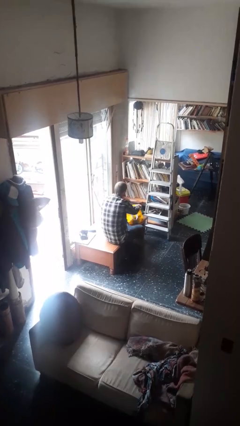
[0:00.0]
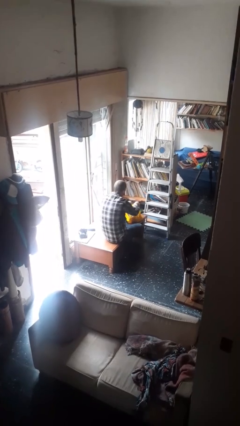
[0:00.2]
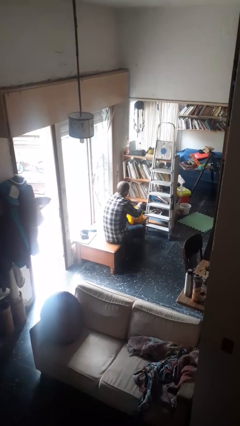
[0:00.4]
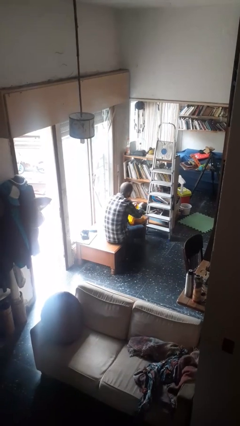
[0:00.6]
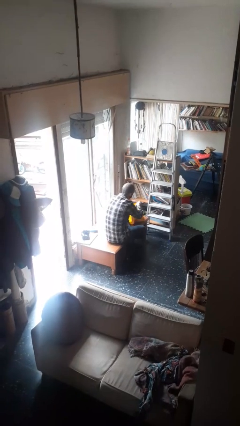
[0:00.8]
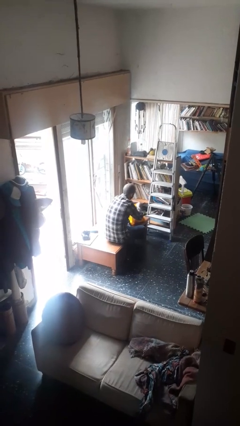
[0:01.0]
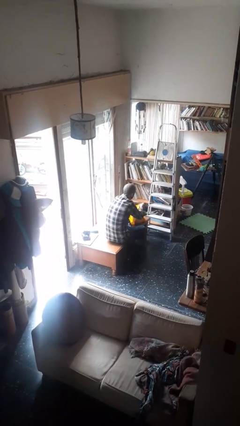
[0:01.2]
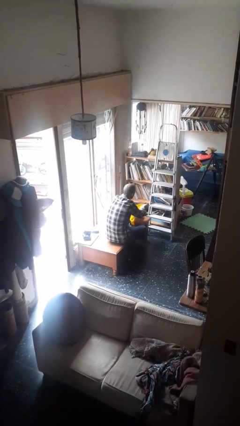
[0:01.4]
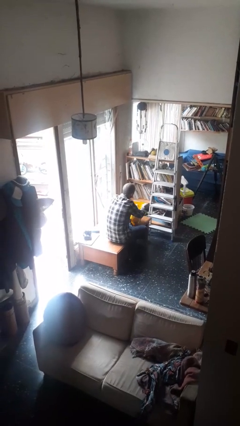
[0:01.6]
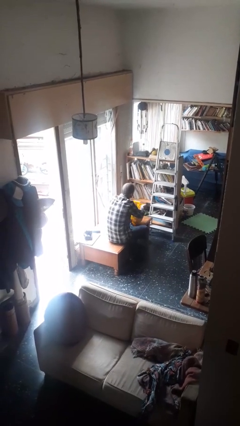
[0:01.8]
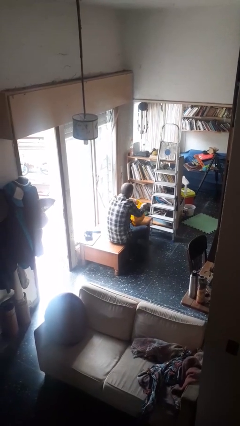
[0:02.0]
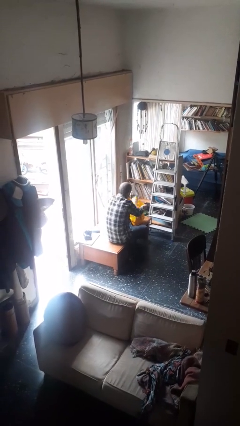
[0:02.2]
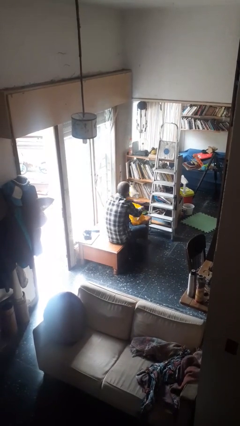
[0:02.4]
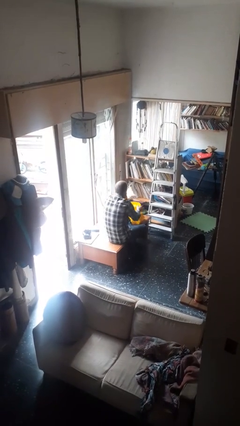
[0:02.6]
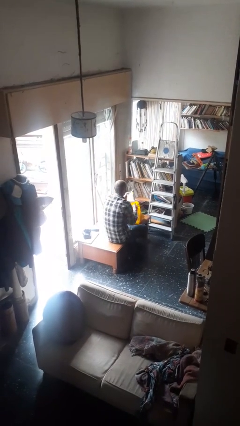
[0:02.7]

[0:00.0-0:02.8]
person takes object from bag

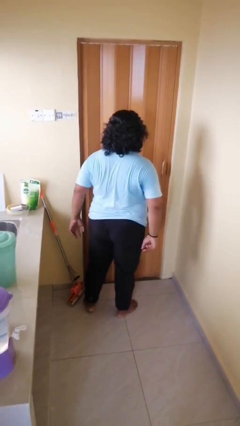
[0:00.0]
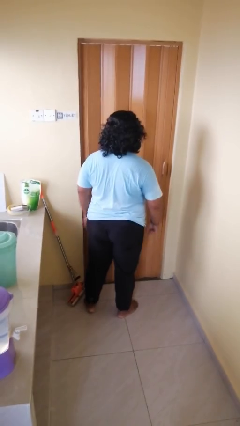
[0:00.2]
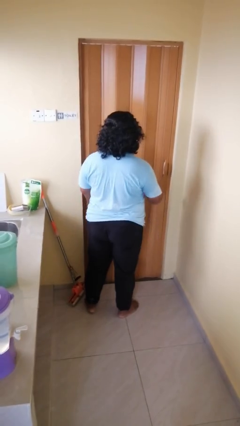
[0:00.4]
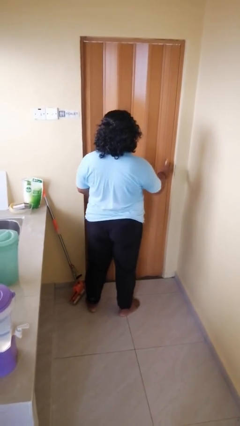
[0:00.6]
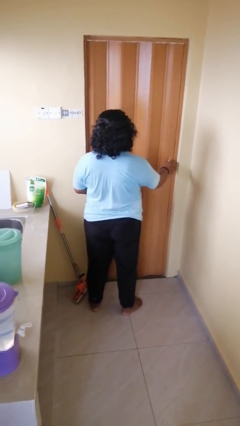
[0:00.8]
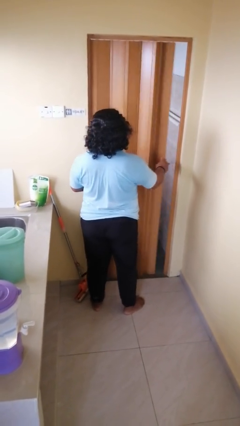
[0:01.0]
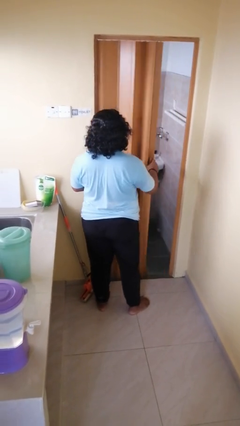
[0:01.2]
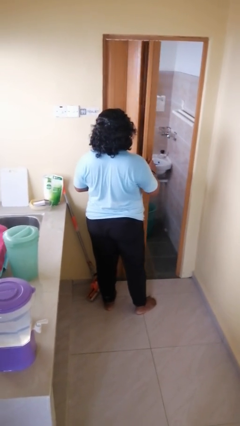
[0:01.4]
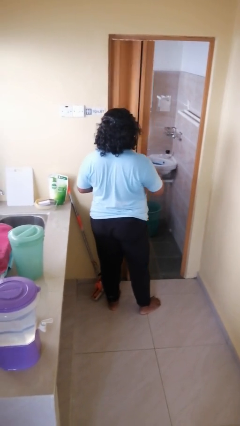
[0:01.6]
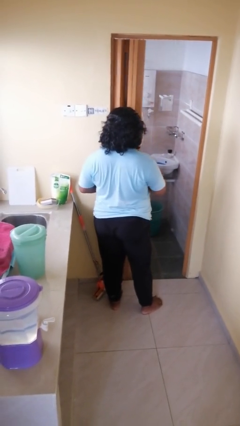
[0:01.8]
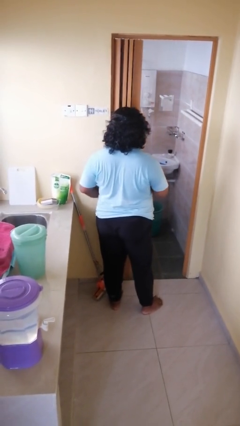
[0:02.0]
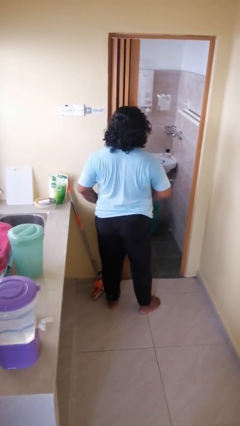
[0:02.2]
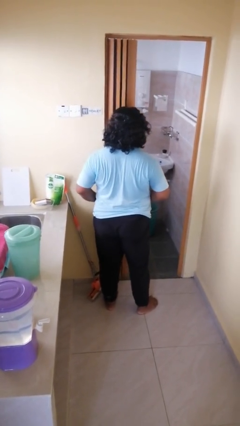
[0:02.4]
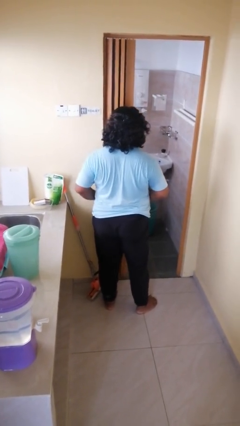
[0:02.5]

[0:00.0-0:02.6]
person opens sliding door

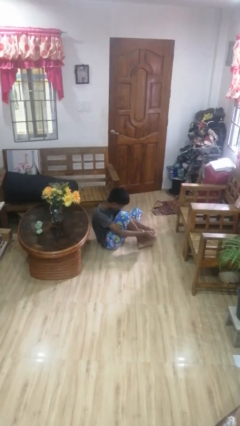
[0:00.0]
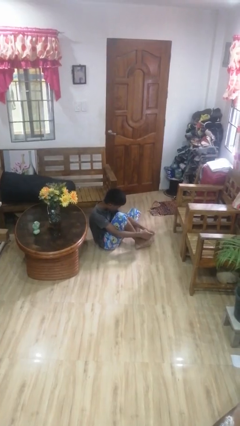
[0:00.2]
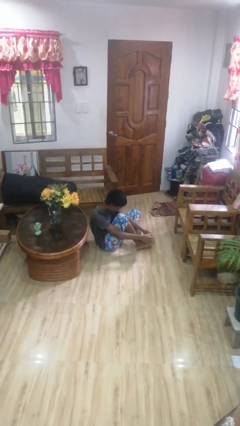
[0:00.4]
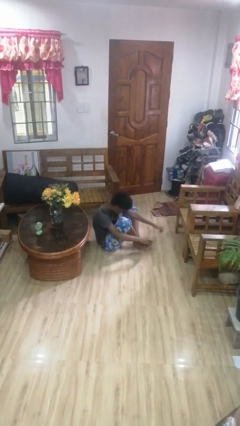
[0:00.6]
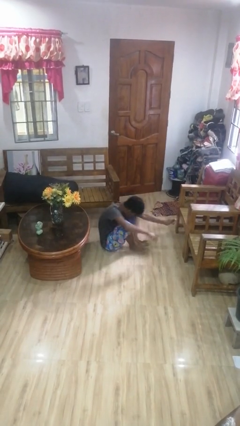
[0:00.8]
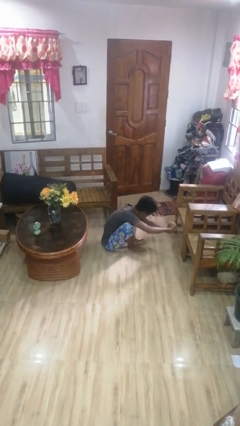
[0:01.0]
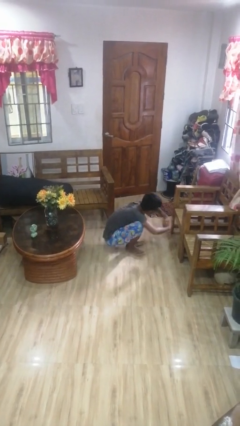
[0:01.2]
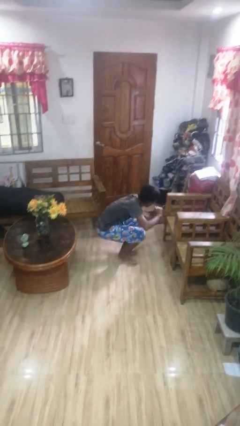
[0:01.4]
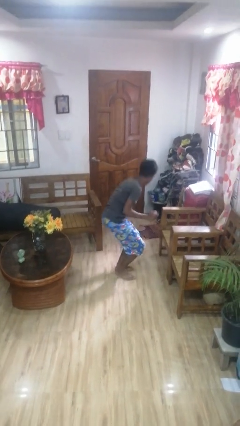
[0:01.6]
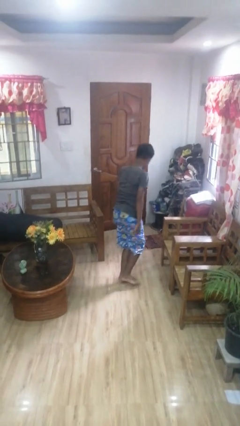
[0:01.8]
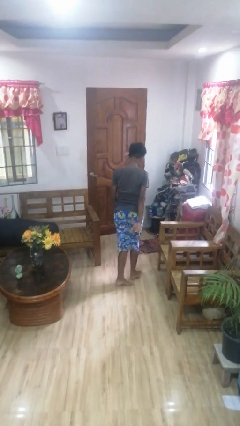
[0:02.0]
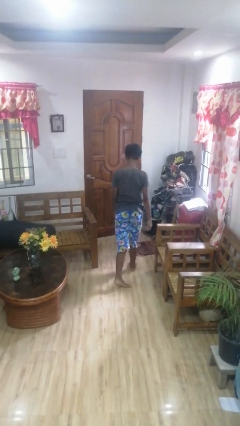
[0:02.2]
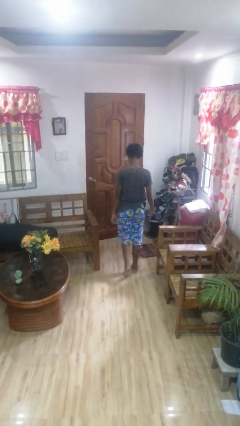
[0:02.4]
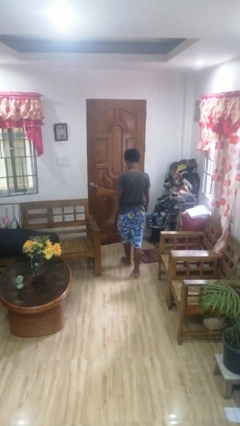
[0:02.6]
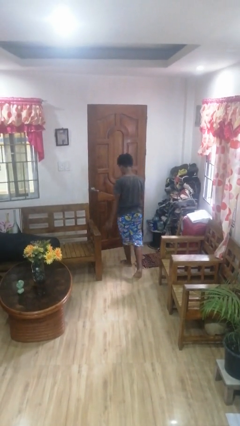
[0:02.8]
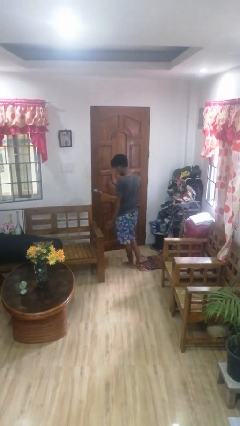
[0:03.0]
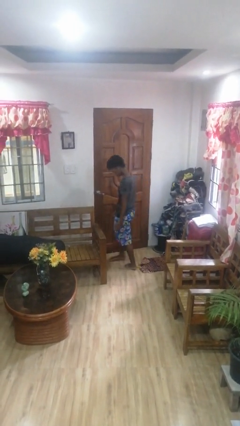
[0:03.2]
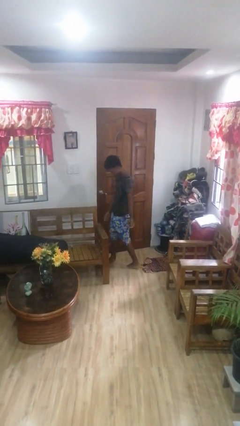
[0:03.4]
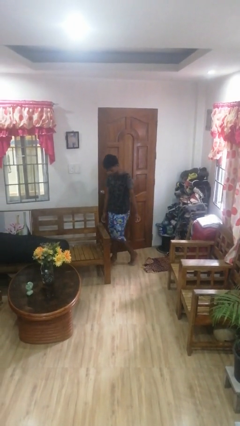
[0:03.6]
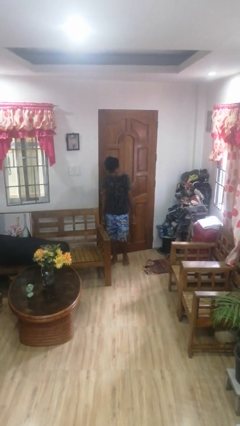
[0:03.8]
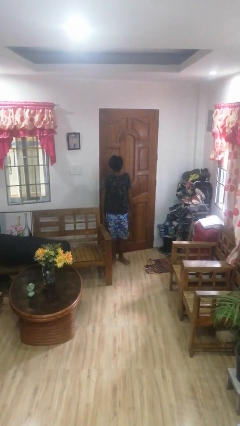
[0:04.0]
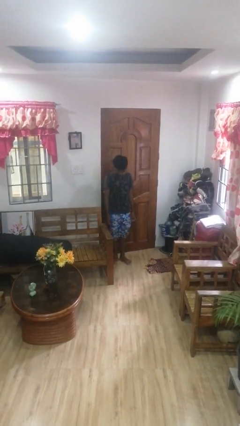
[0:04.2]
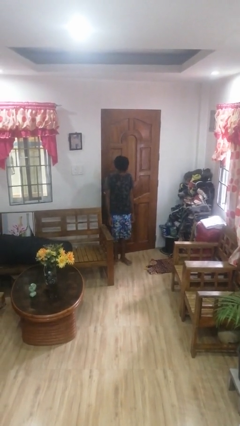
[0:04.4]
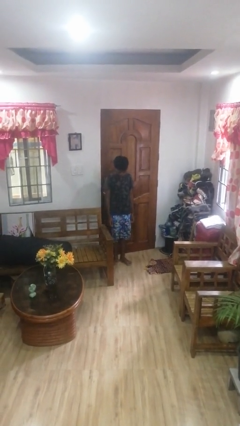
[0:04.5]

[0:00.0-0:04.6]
person stands up from floor

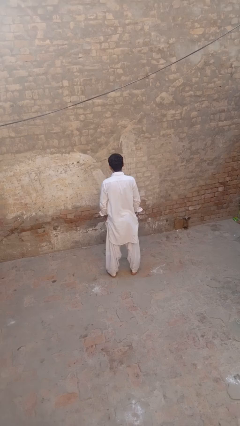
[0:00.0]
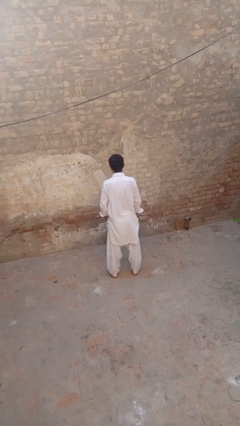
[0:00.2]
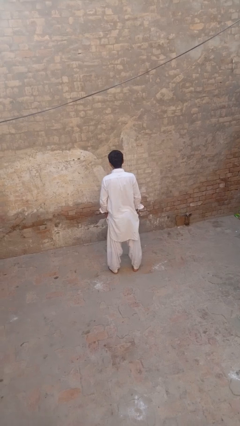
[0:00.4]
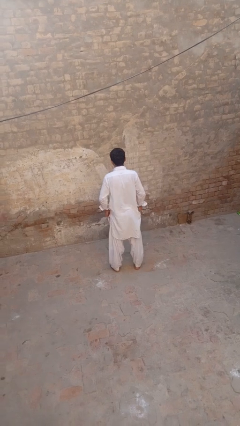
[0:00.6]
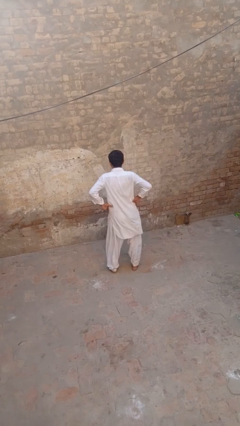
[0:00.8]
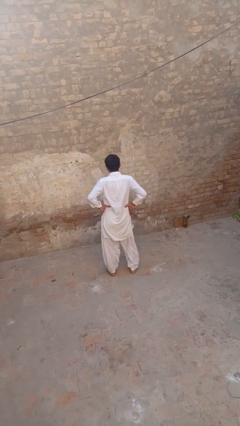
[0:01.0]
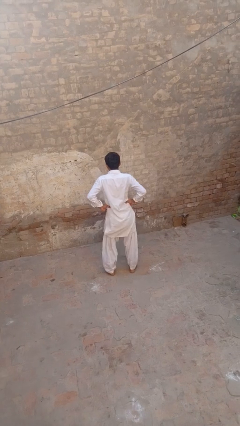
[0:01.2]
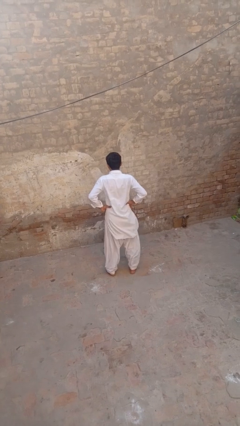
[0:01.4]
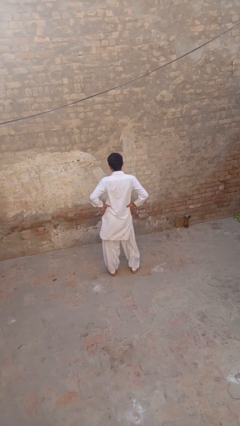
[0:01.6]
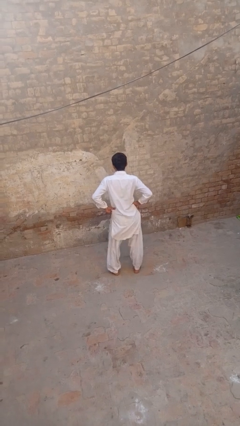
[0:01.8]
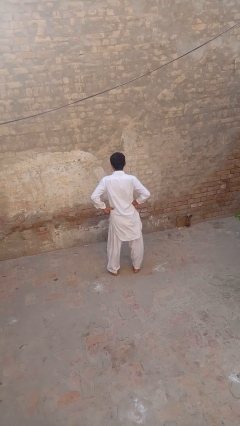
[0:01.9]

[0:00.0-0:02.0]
person wiggles hips

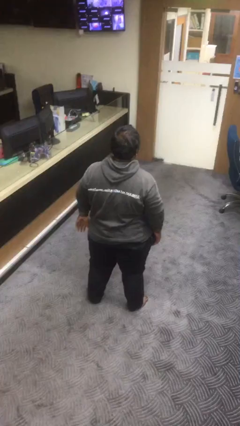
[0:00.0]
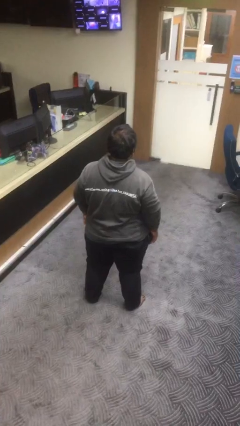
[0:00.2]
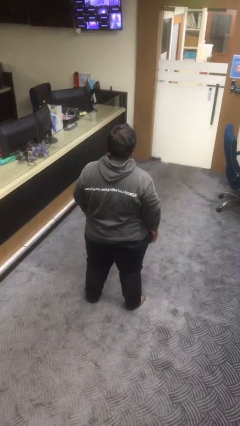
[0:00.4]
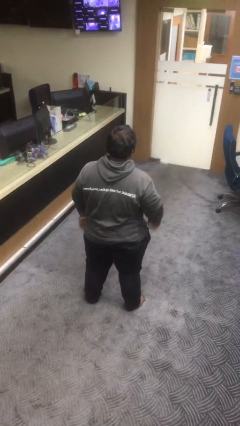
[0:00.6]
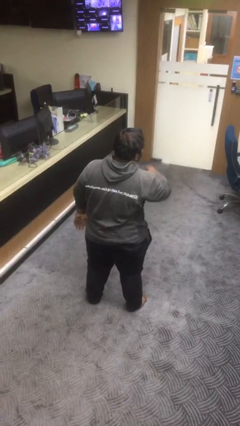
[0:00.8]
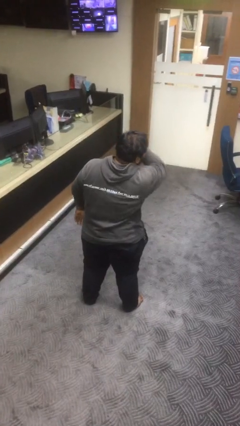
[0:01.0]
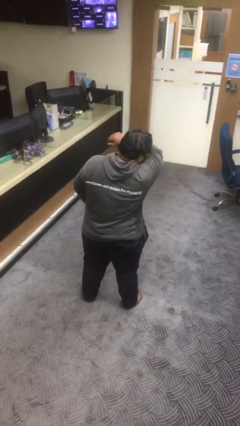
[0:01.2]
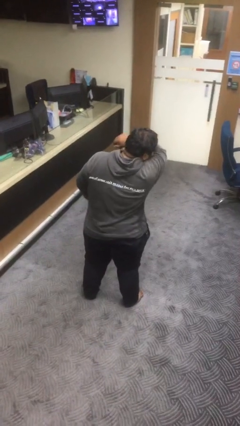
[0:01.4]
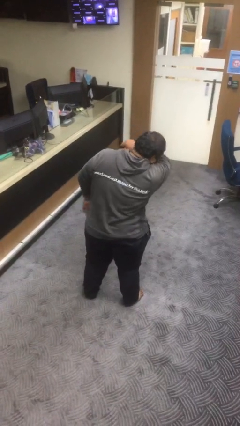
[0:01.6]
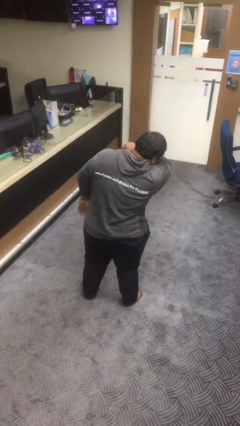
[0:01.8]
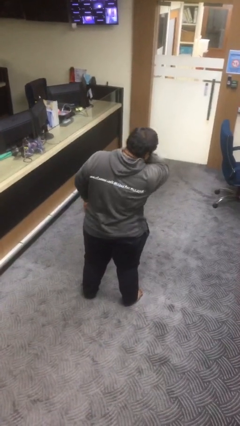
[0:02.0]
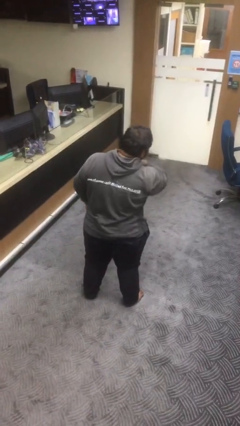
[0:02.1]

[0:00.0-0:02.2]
person sneezes into arm

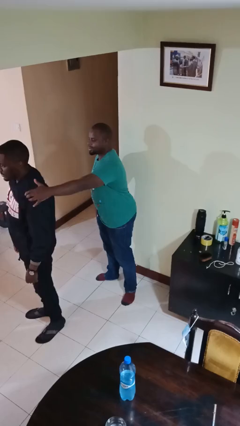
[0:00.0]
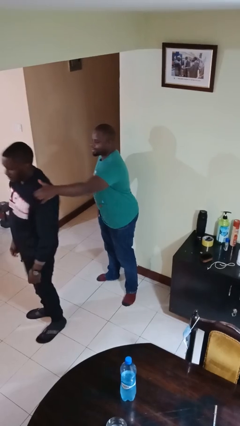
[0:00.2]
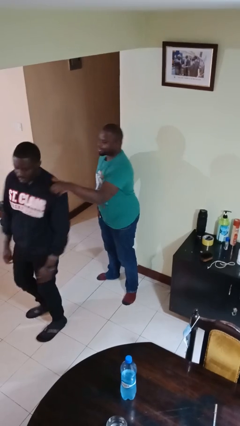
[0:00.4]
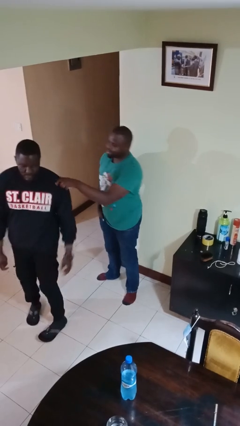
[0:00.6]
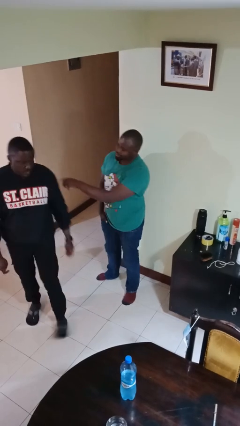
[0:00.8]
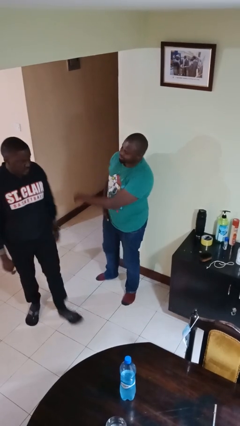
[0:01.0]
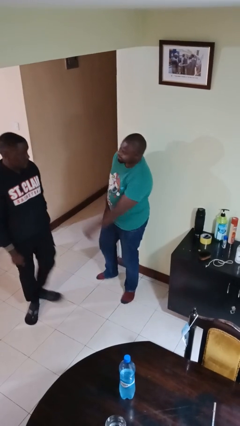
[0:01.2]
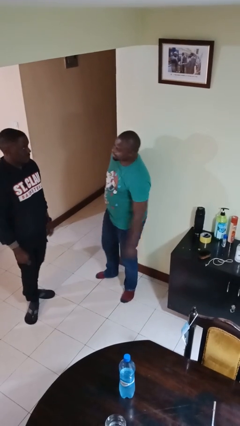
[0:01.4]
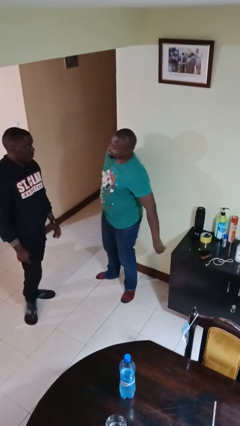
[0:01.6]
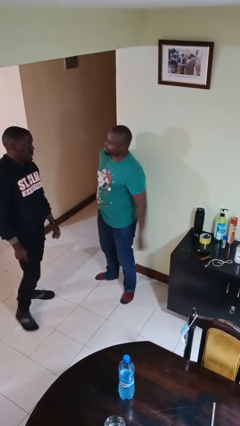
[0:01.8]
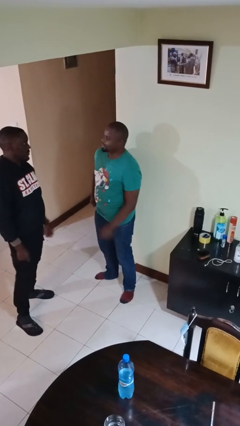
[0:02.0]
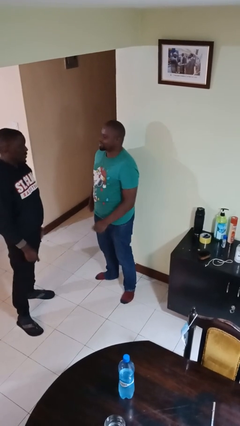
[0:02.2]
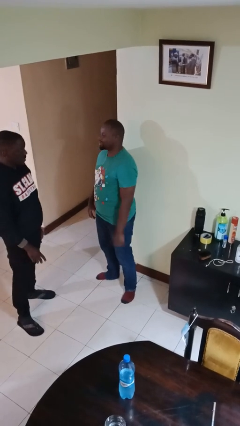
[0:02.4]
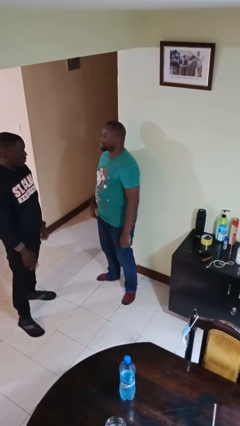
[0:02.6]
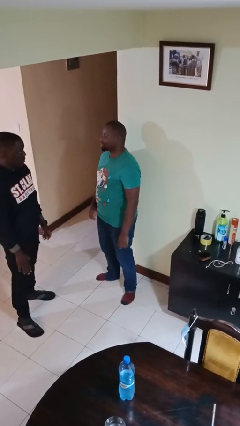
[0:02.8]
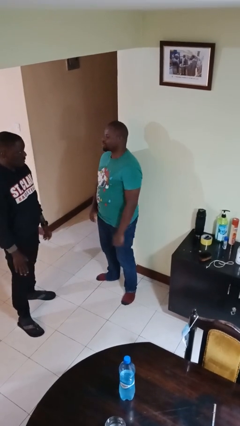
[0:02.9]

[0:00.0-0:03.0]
person spins person around

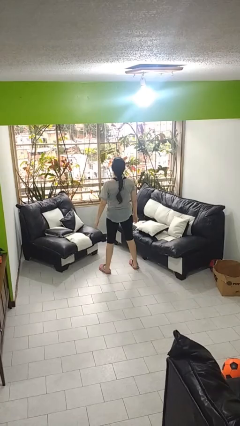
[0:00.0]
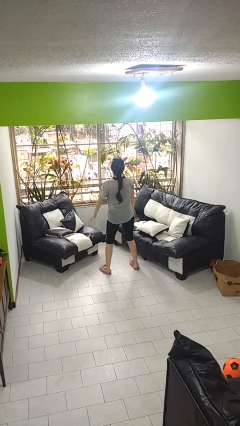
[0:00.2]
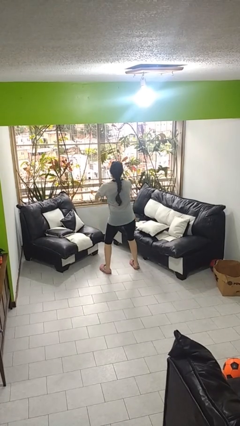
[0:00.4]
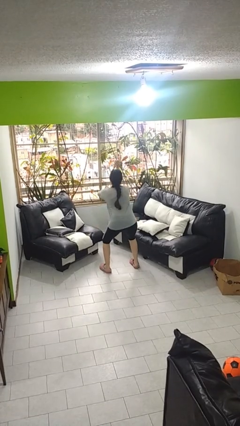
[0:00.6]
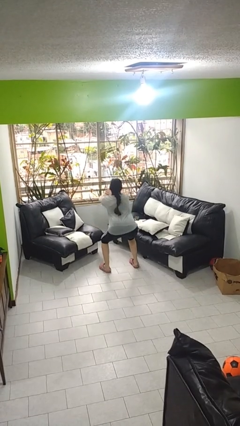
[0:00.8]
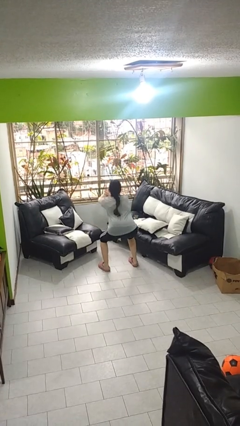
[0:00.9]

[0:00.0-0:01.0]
person squats
